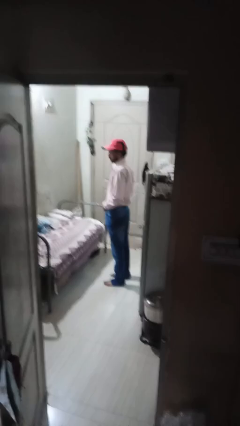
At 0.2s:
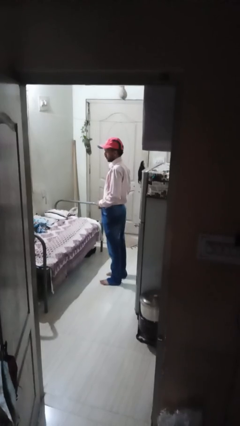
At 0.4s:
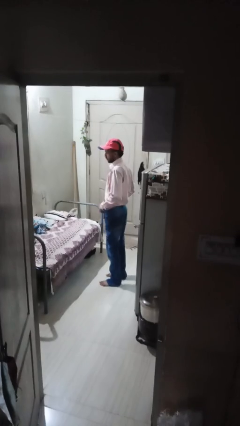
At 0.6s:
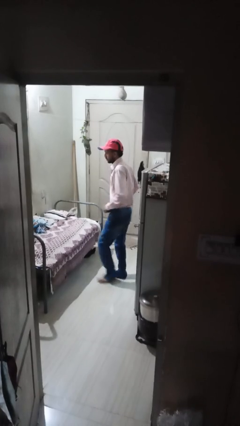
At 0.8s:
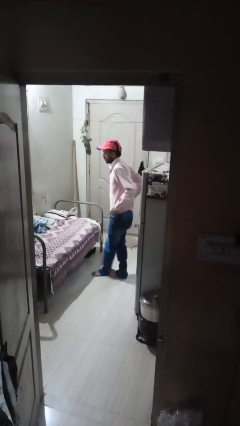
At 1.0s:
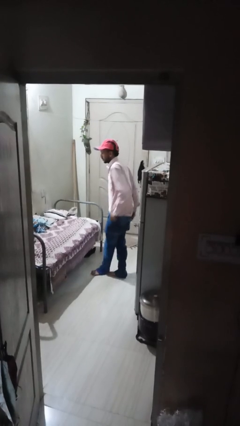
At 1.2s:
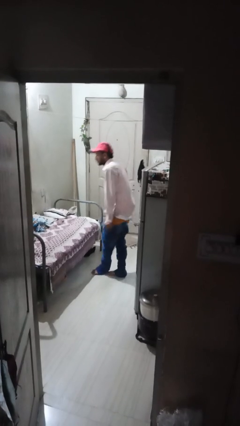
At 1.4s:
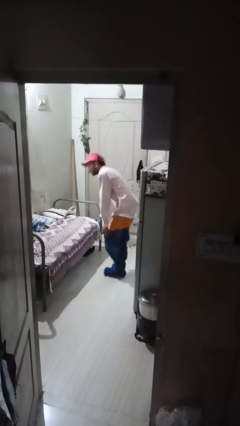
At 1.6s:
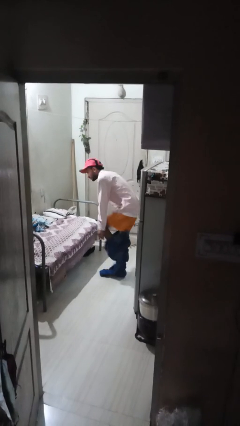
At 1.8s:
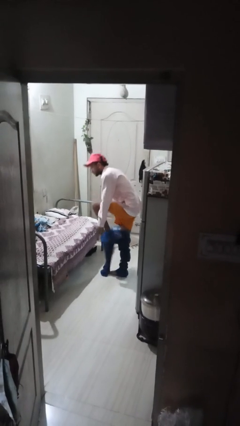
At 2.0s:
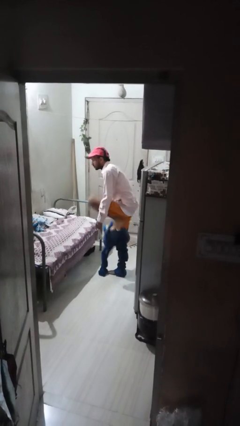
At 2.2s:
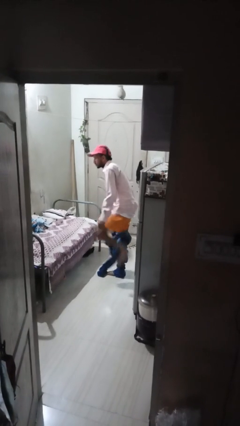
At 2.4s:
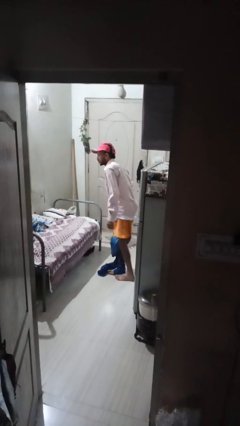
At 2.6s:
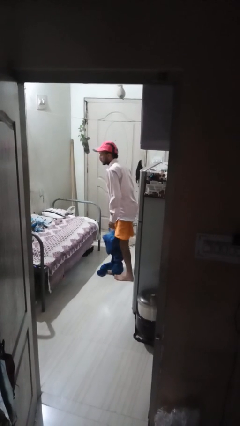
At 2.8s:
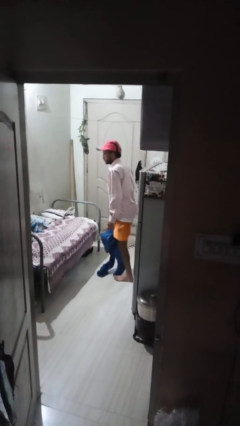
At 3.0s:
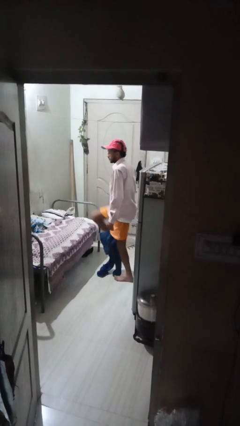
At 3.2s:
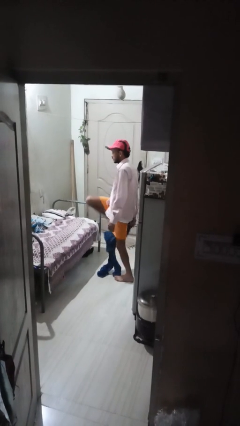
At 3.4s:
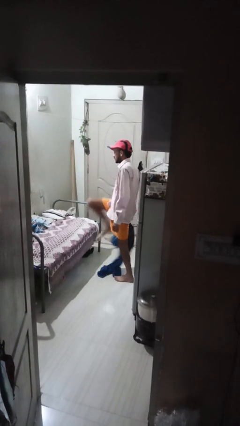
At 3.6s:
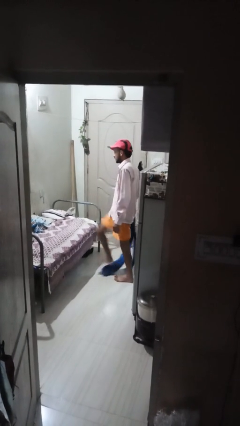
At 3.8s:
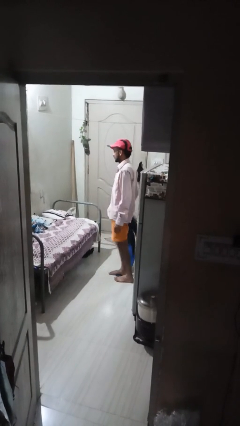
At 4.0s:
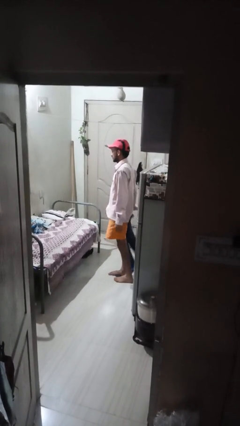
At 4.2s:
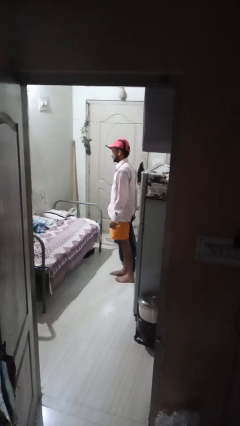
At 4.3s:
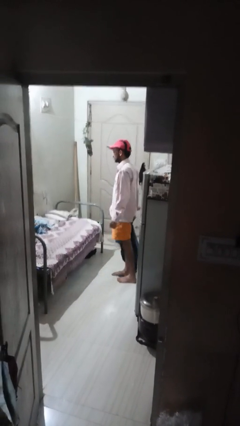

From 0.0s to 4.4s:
person takes off pants

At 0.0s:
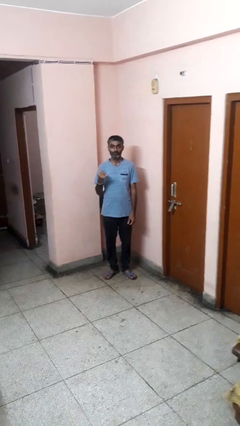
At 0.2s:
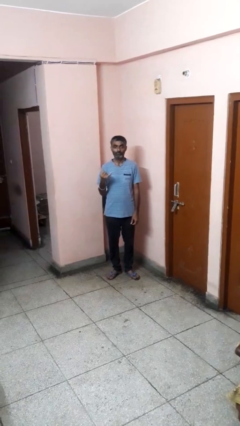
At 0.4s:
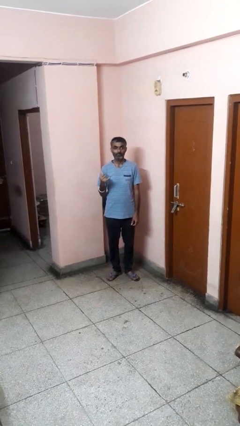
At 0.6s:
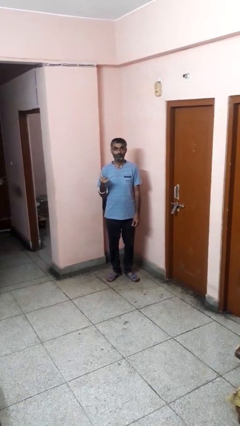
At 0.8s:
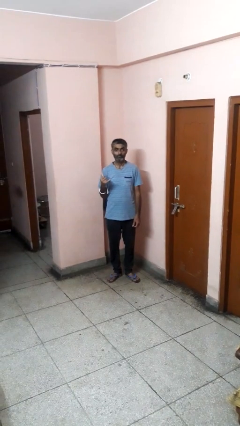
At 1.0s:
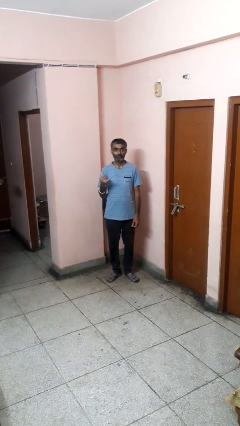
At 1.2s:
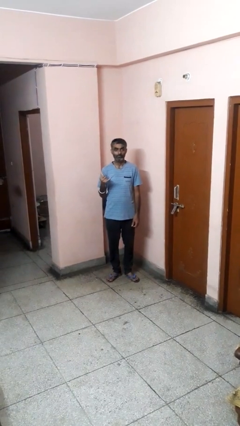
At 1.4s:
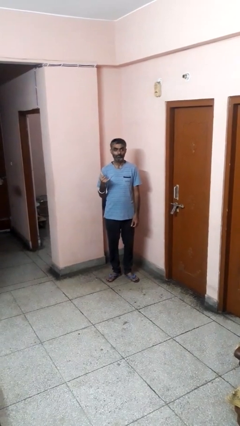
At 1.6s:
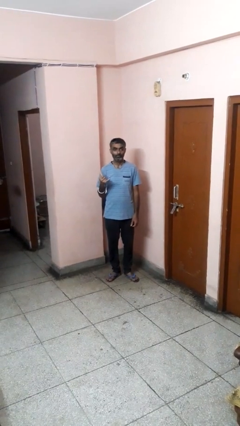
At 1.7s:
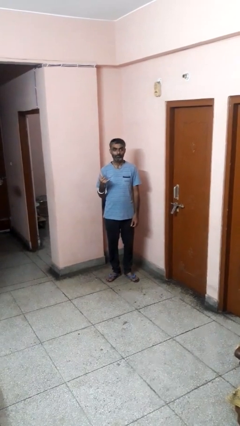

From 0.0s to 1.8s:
person gestures hang loose

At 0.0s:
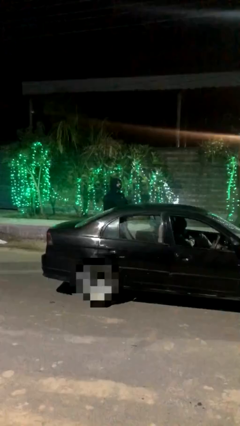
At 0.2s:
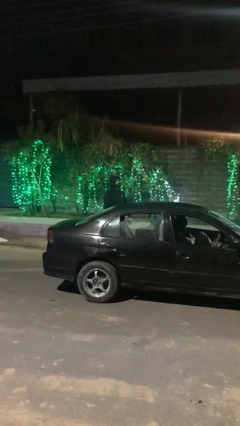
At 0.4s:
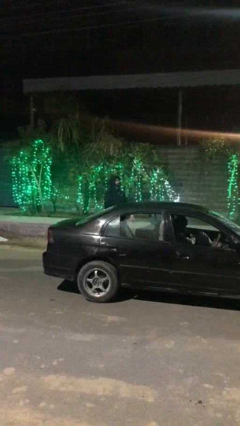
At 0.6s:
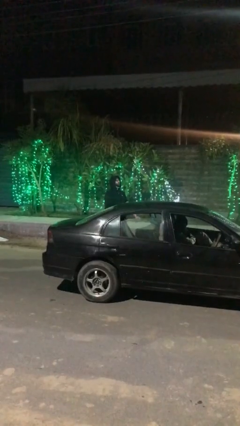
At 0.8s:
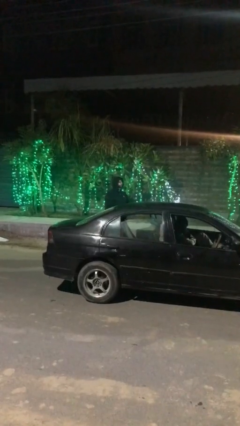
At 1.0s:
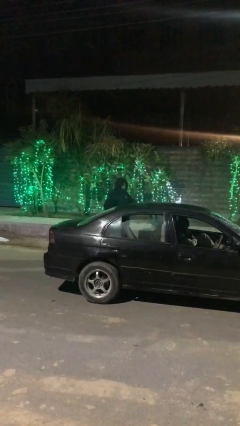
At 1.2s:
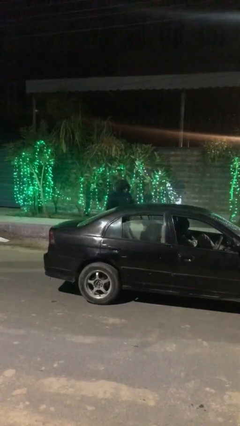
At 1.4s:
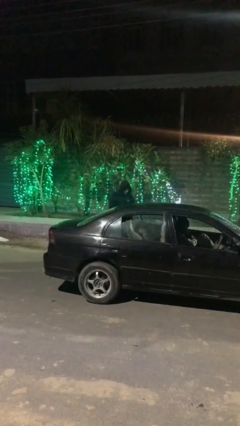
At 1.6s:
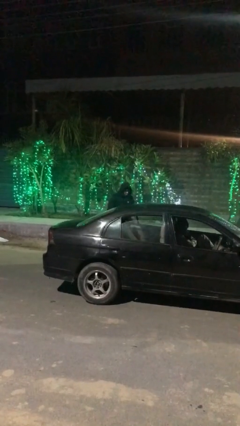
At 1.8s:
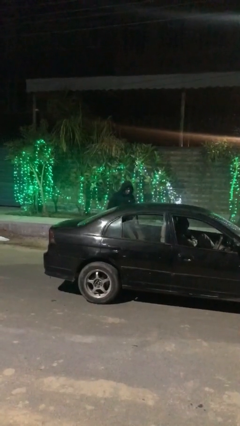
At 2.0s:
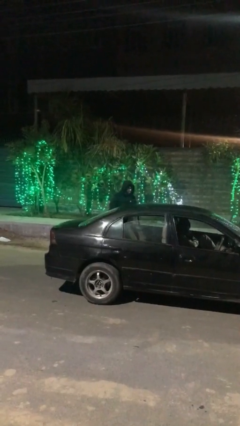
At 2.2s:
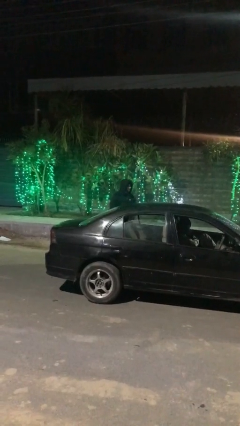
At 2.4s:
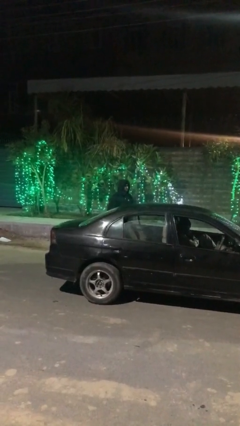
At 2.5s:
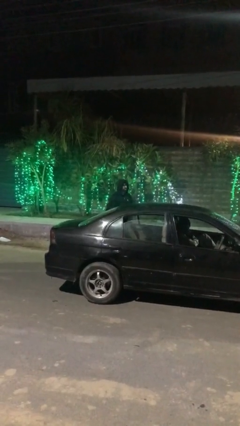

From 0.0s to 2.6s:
person closes car door

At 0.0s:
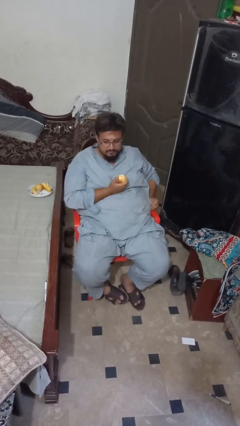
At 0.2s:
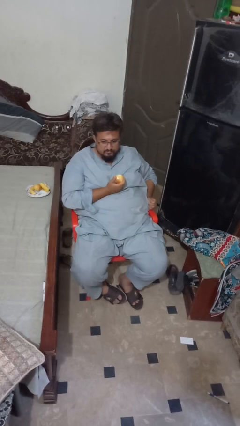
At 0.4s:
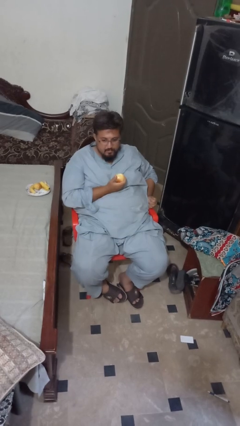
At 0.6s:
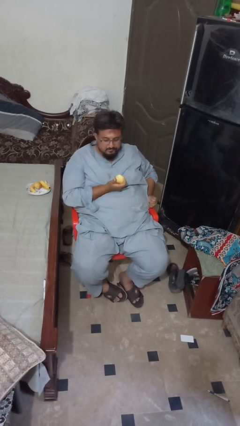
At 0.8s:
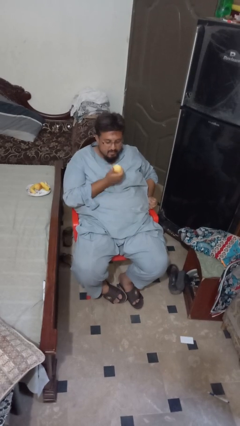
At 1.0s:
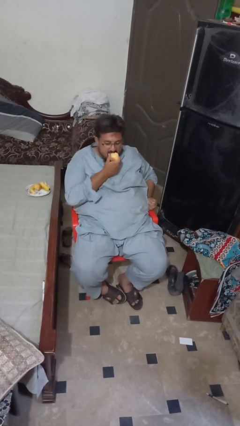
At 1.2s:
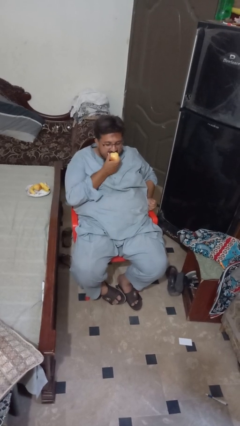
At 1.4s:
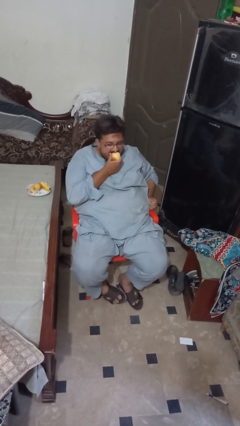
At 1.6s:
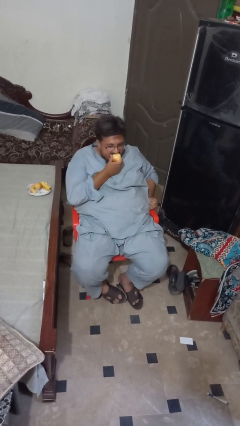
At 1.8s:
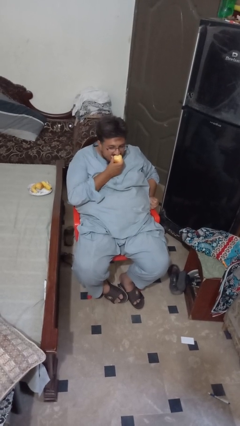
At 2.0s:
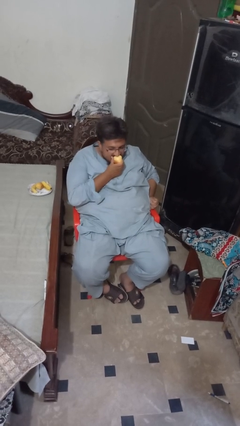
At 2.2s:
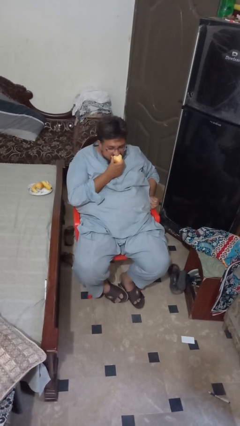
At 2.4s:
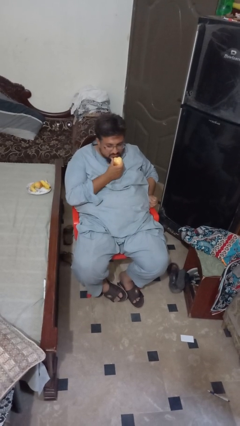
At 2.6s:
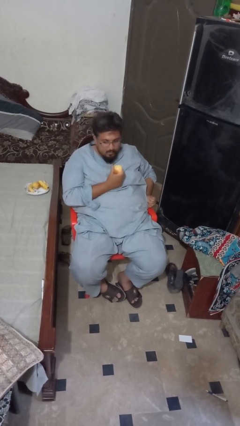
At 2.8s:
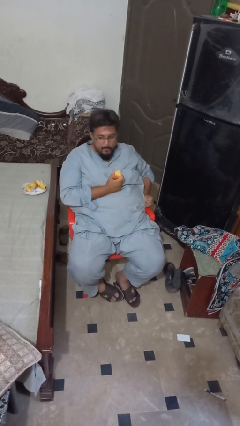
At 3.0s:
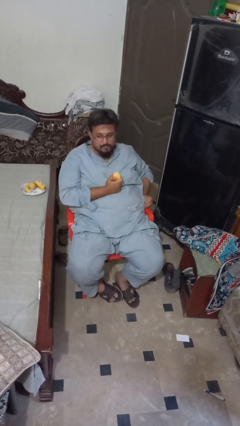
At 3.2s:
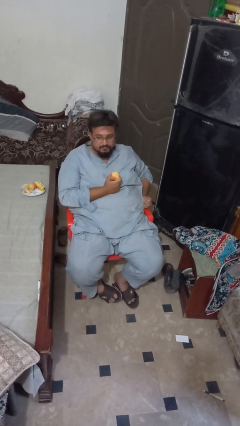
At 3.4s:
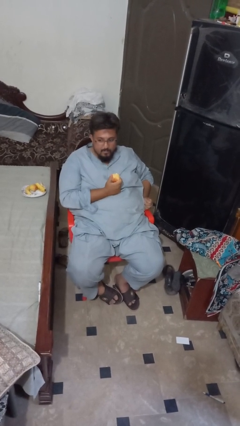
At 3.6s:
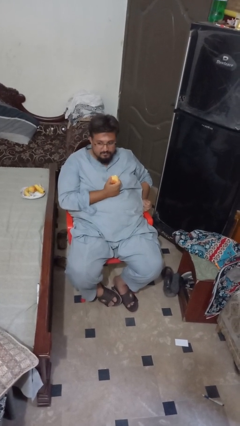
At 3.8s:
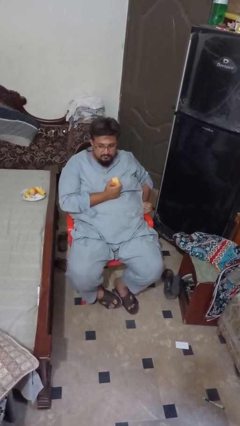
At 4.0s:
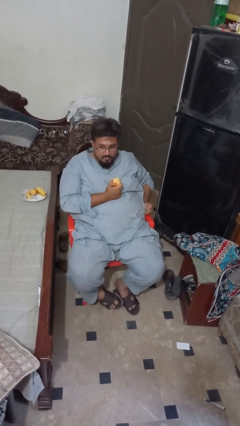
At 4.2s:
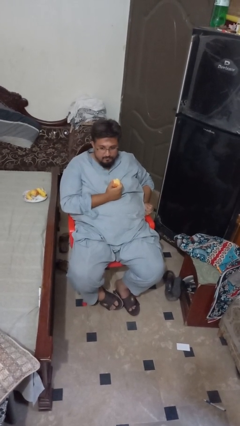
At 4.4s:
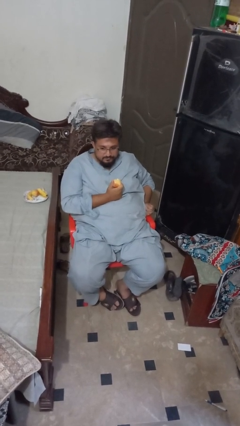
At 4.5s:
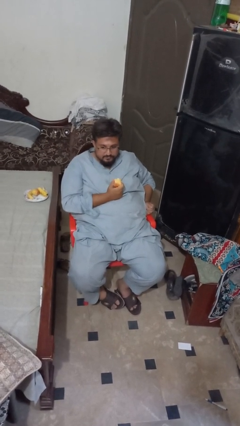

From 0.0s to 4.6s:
person eats apple

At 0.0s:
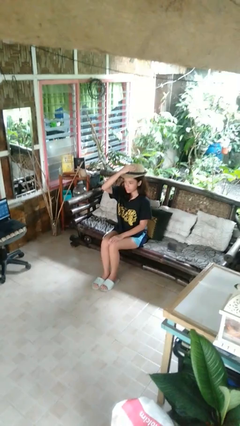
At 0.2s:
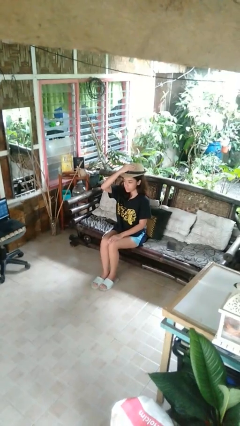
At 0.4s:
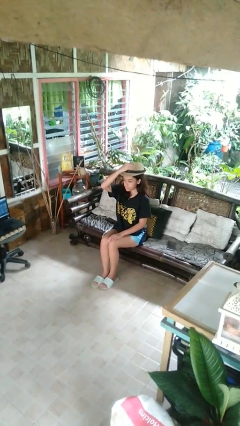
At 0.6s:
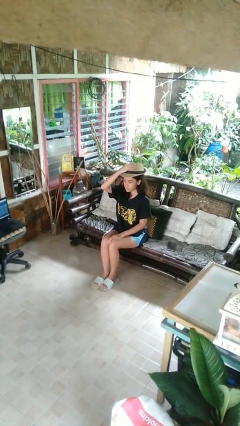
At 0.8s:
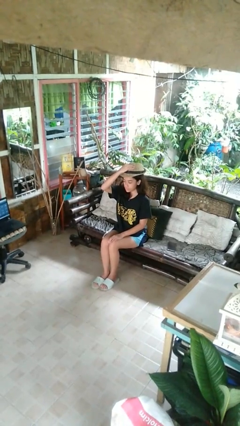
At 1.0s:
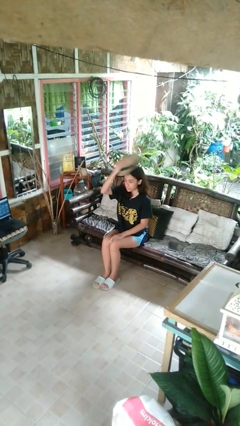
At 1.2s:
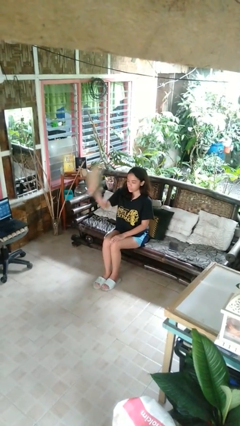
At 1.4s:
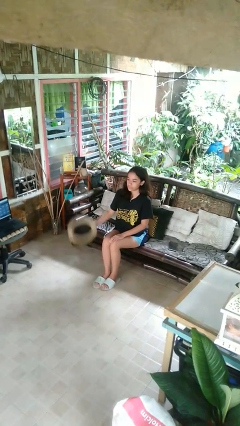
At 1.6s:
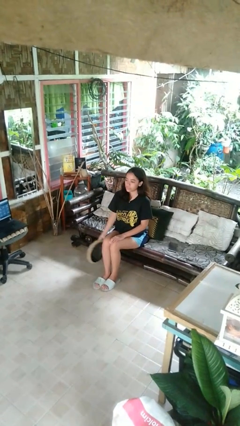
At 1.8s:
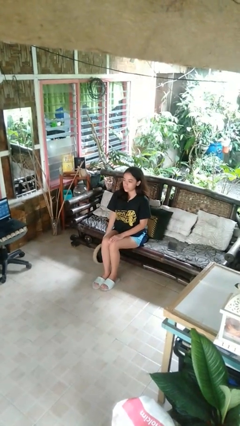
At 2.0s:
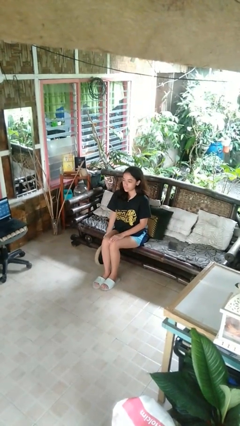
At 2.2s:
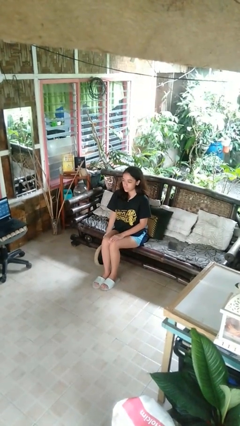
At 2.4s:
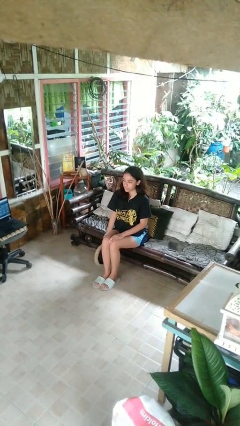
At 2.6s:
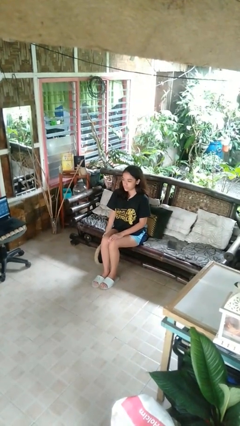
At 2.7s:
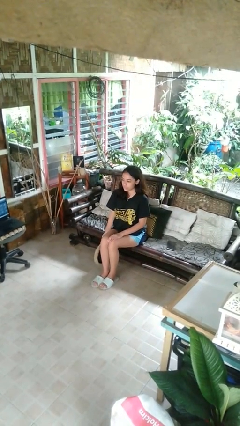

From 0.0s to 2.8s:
person takes off hat

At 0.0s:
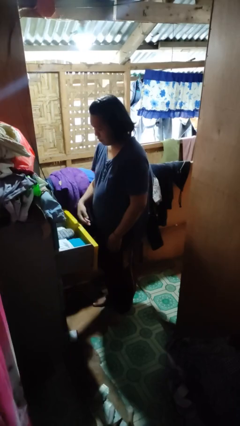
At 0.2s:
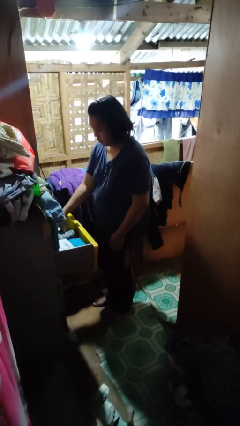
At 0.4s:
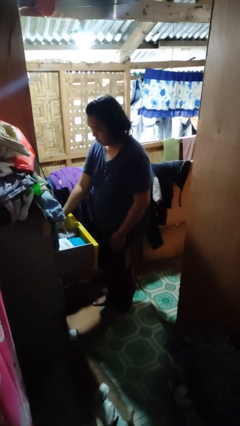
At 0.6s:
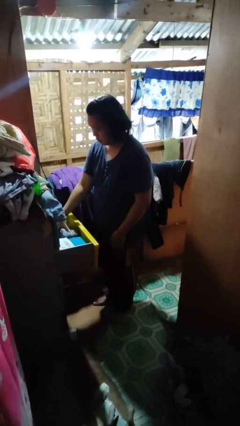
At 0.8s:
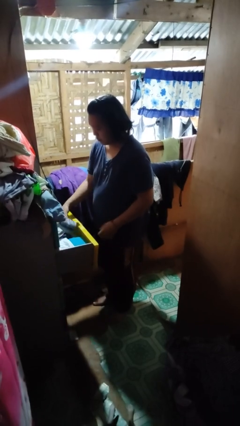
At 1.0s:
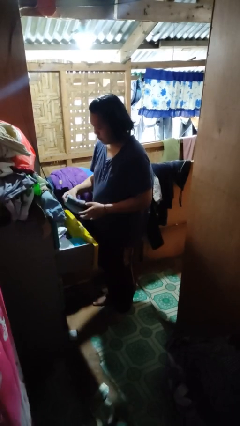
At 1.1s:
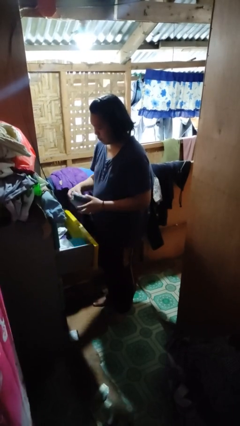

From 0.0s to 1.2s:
person takes clothes from dresser

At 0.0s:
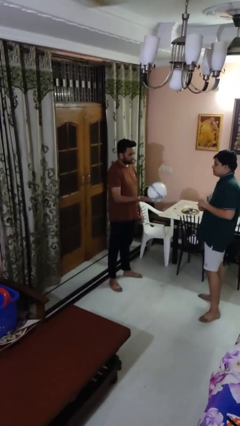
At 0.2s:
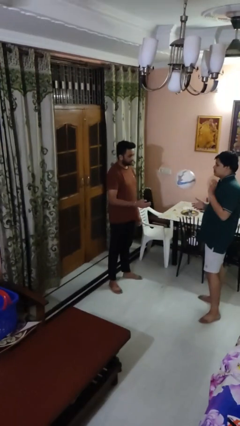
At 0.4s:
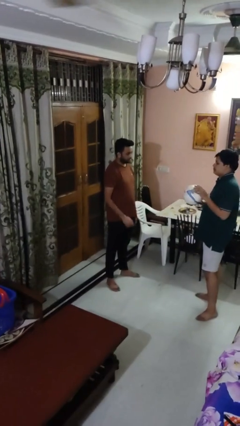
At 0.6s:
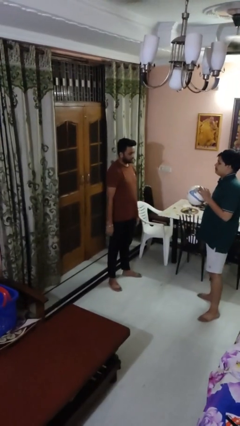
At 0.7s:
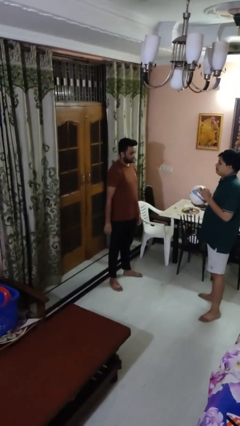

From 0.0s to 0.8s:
person throws object to person
